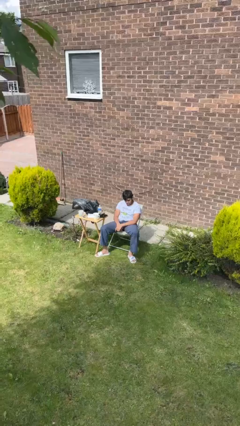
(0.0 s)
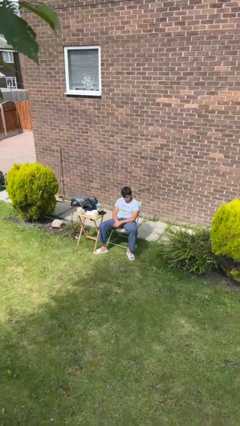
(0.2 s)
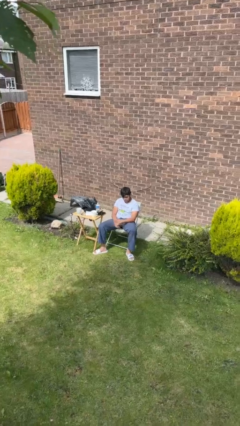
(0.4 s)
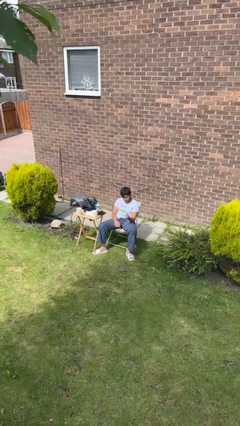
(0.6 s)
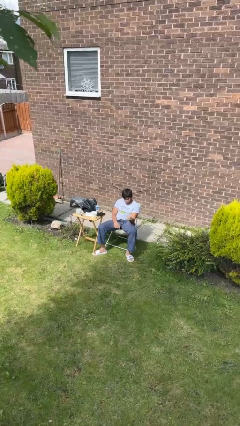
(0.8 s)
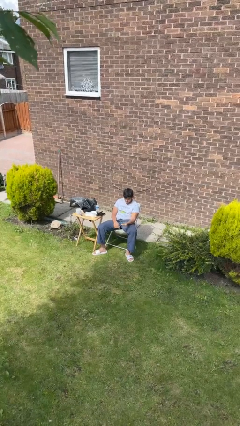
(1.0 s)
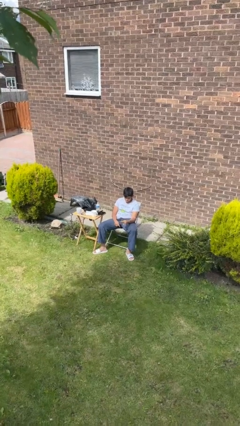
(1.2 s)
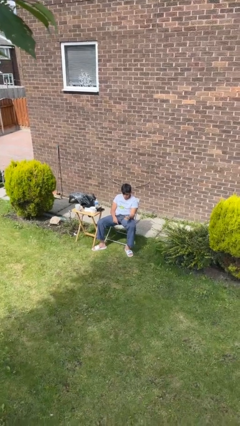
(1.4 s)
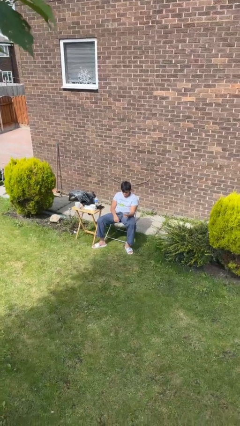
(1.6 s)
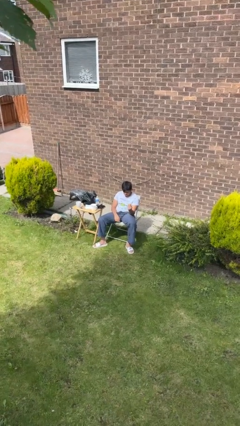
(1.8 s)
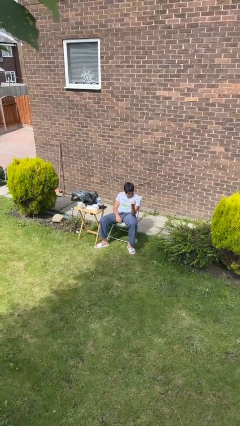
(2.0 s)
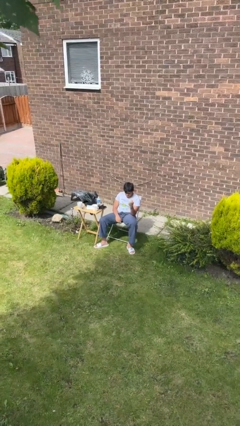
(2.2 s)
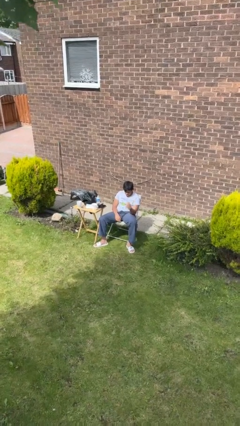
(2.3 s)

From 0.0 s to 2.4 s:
person snaps fingers

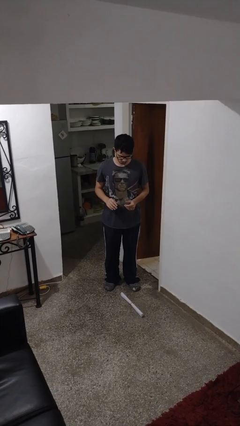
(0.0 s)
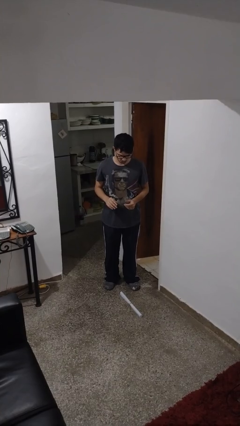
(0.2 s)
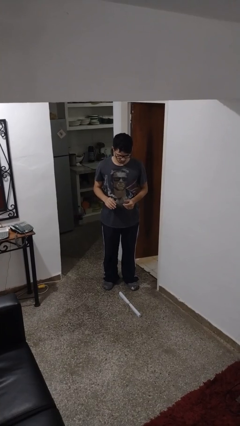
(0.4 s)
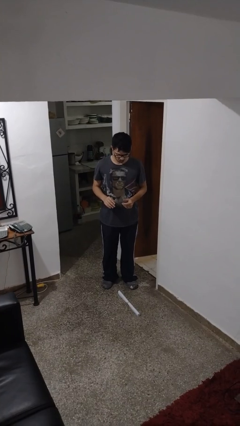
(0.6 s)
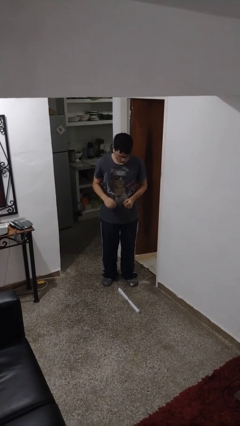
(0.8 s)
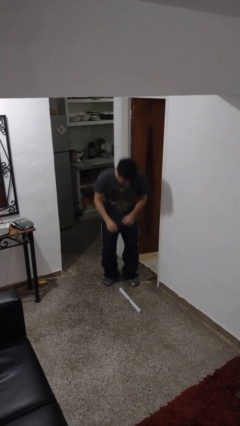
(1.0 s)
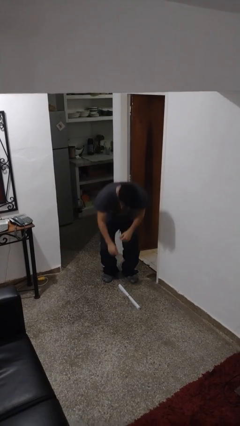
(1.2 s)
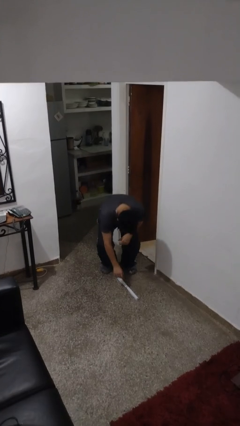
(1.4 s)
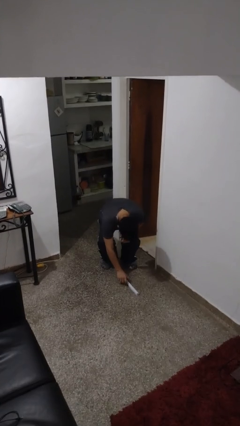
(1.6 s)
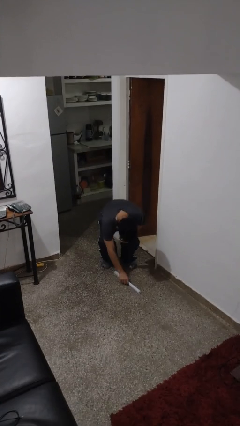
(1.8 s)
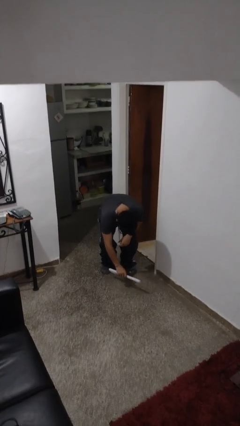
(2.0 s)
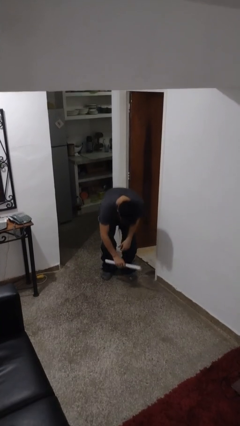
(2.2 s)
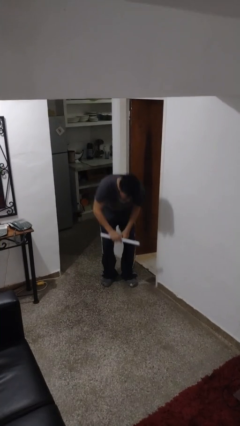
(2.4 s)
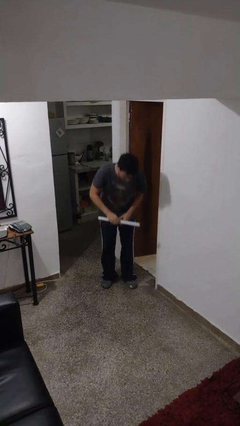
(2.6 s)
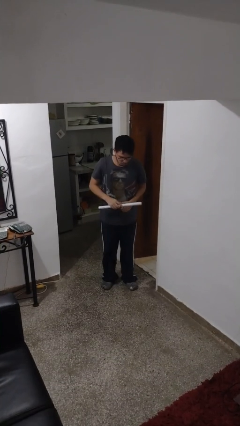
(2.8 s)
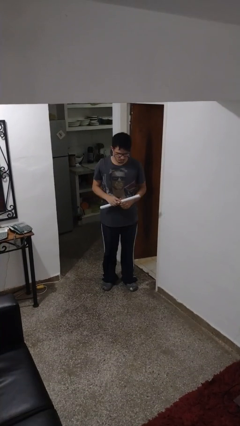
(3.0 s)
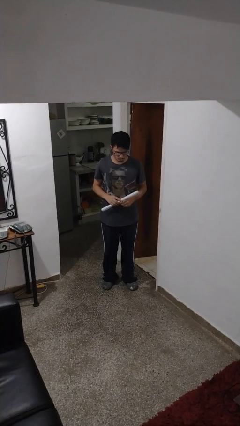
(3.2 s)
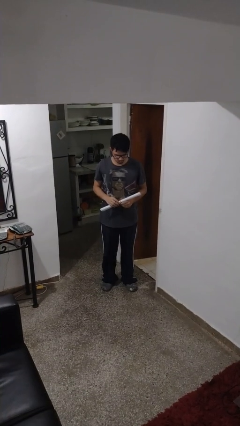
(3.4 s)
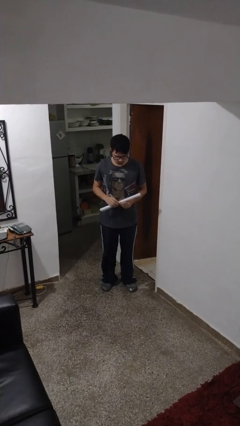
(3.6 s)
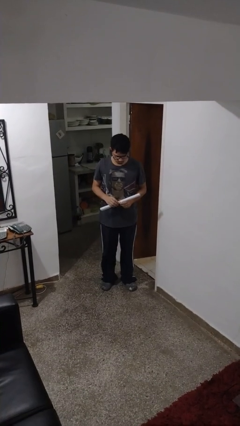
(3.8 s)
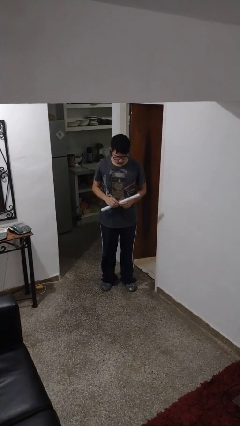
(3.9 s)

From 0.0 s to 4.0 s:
person picks up object from floor

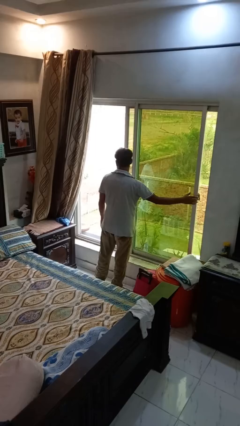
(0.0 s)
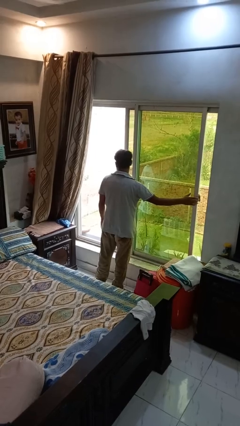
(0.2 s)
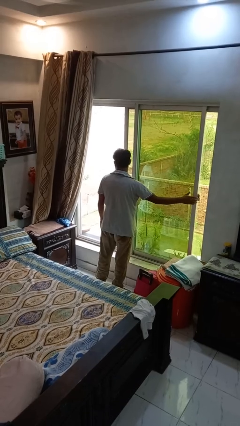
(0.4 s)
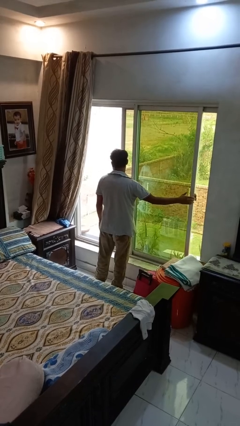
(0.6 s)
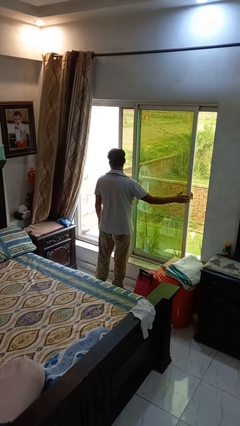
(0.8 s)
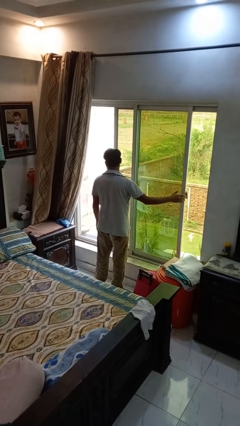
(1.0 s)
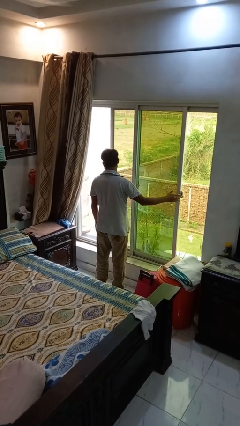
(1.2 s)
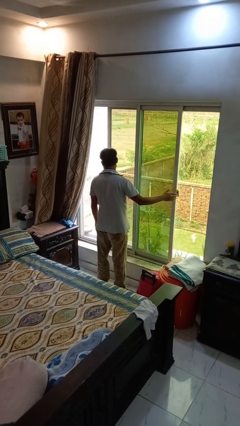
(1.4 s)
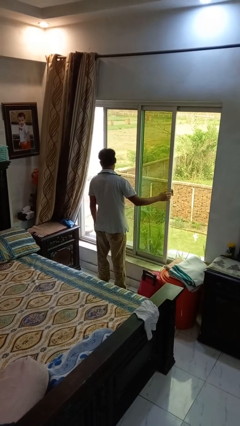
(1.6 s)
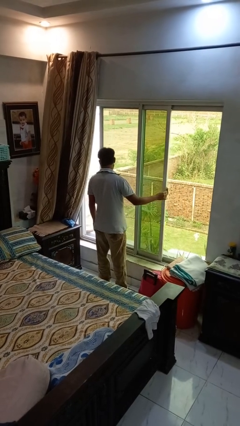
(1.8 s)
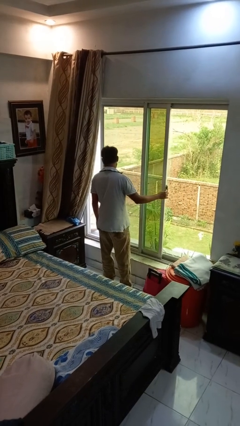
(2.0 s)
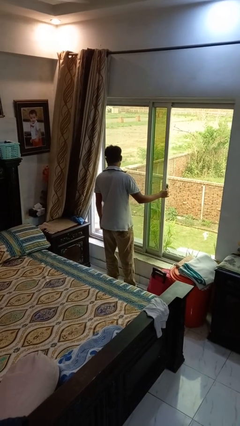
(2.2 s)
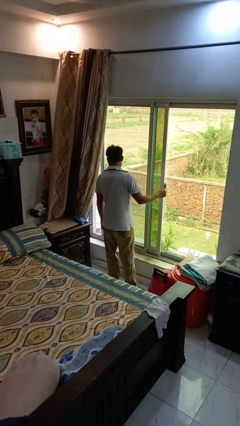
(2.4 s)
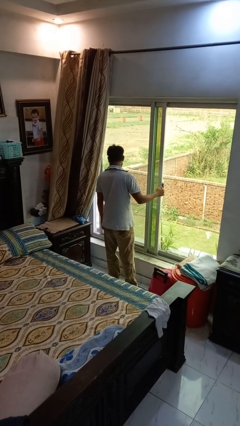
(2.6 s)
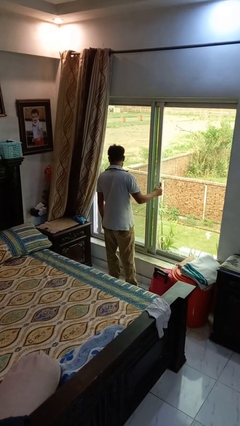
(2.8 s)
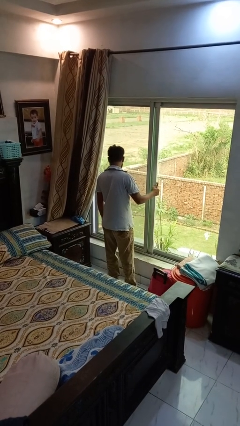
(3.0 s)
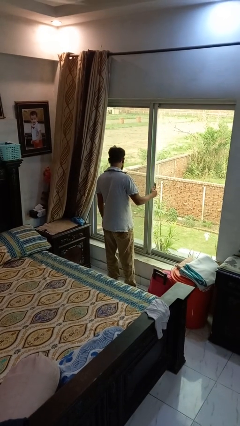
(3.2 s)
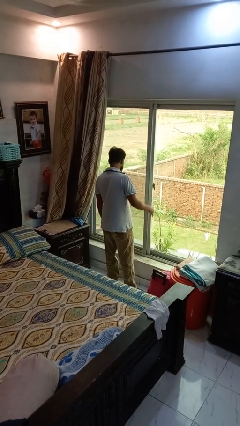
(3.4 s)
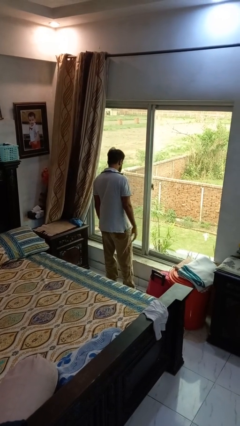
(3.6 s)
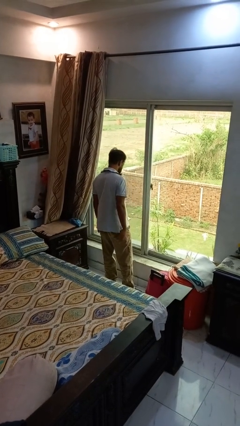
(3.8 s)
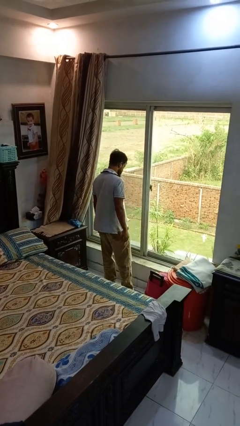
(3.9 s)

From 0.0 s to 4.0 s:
person closes sliding door

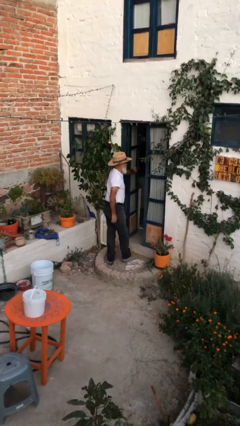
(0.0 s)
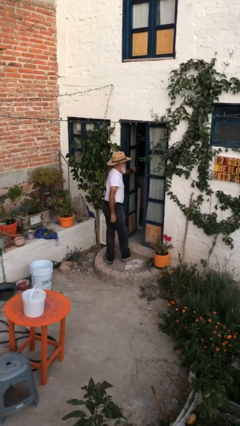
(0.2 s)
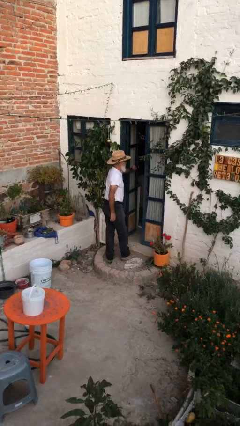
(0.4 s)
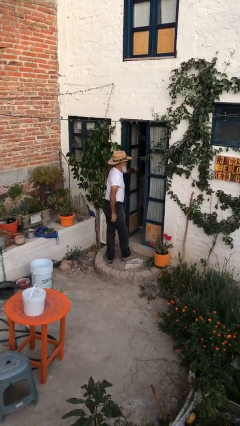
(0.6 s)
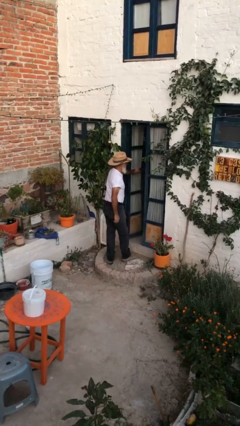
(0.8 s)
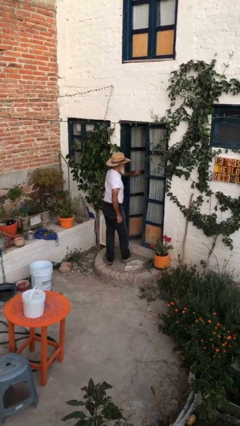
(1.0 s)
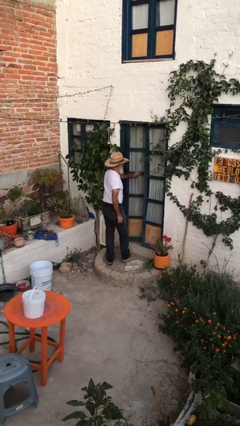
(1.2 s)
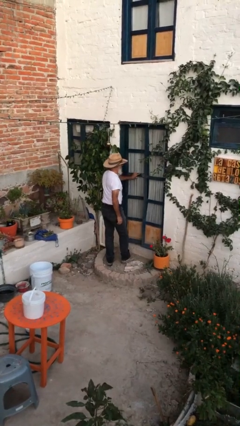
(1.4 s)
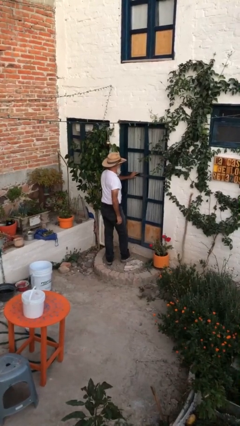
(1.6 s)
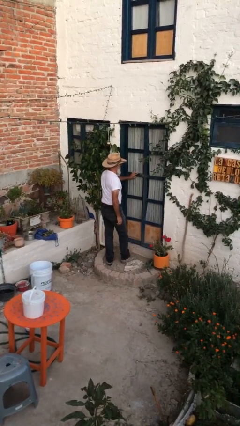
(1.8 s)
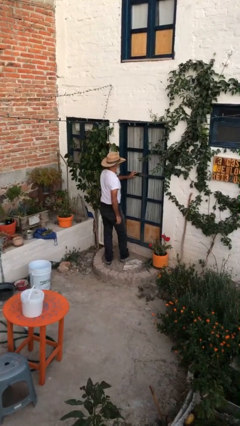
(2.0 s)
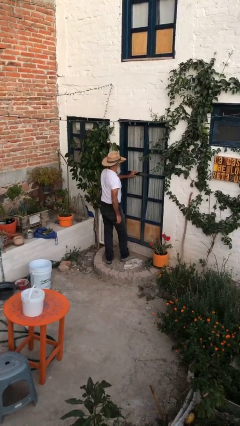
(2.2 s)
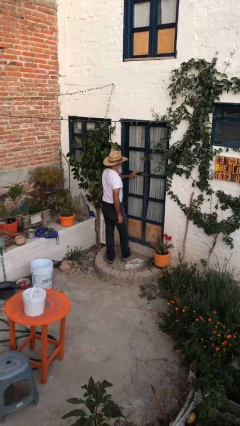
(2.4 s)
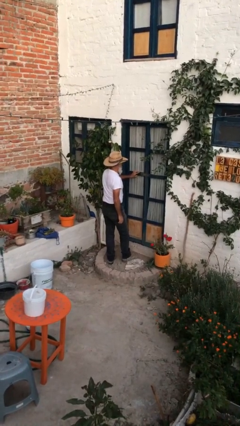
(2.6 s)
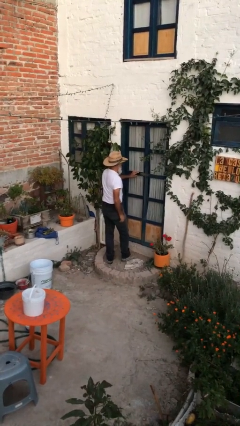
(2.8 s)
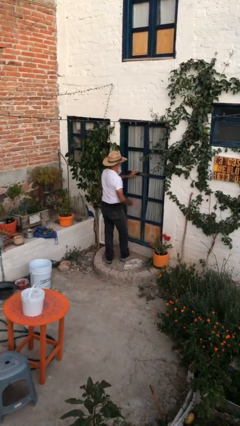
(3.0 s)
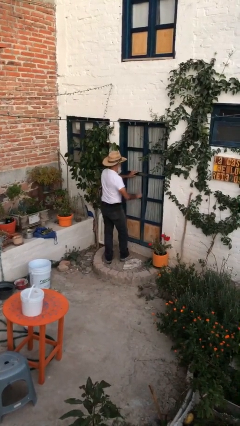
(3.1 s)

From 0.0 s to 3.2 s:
person closes facility door

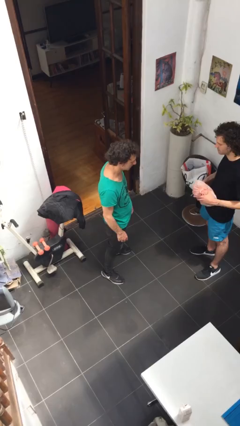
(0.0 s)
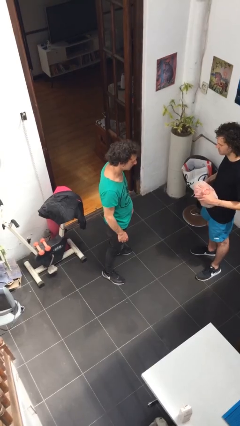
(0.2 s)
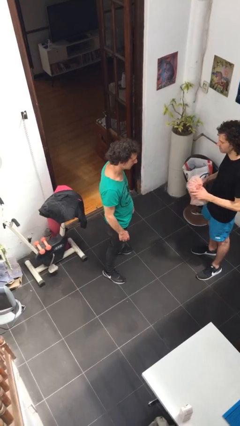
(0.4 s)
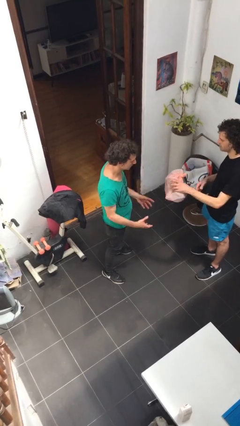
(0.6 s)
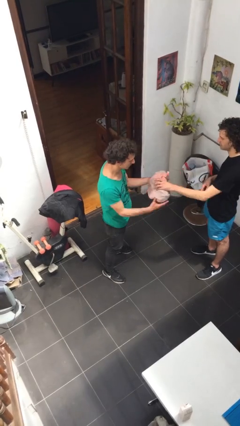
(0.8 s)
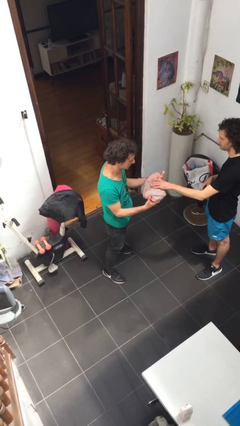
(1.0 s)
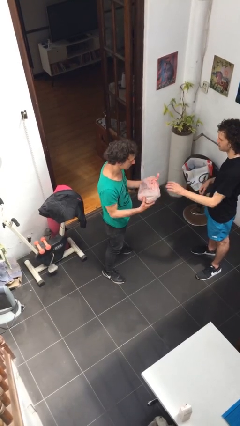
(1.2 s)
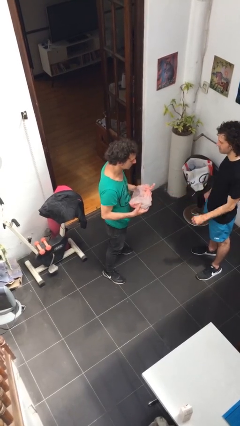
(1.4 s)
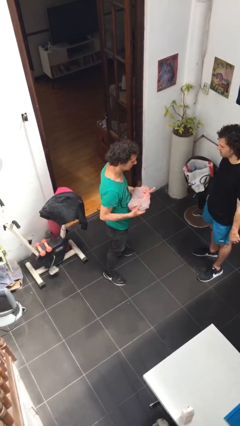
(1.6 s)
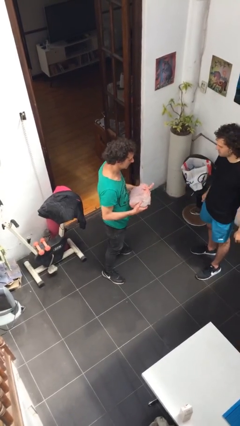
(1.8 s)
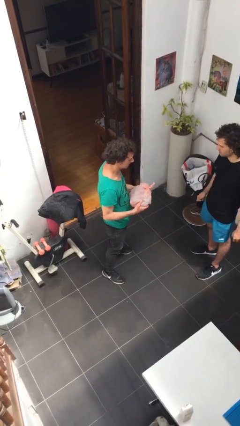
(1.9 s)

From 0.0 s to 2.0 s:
person transfers object to person

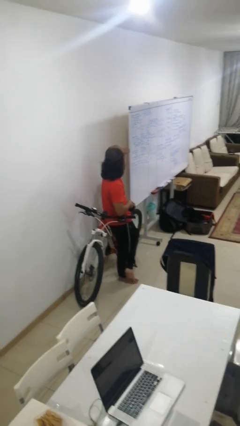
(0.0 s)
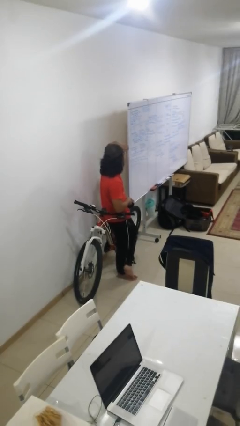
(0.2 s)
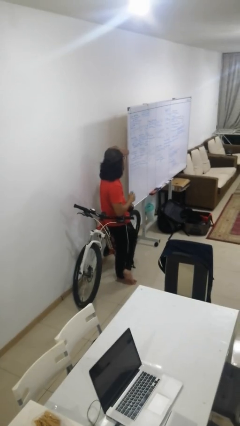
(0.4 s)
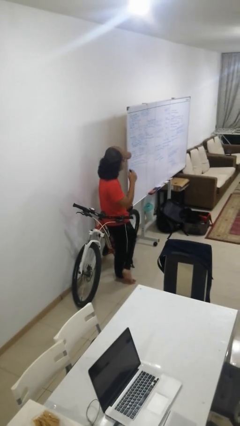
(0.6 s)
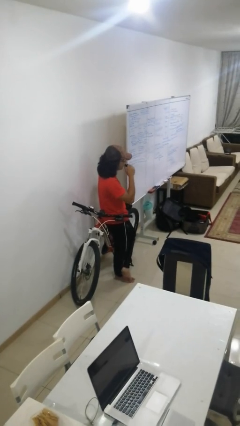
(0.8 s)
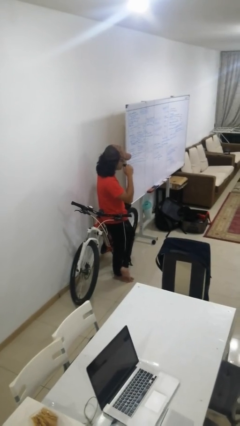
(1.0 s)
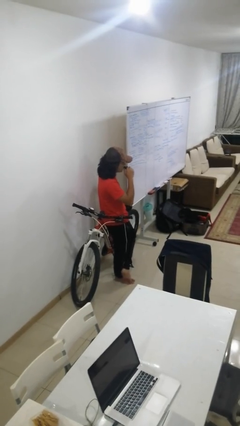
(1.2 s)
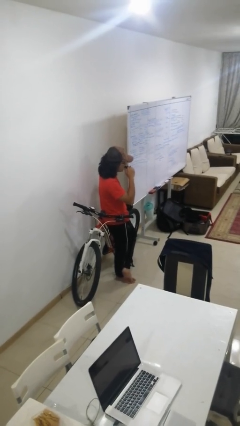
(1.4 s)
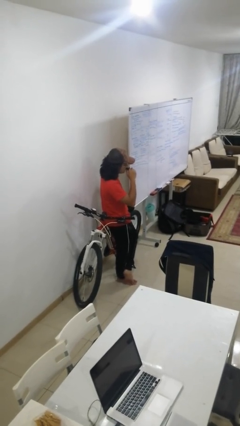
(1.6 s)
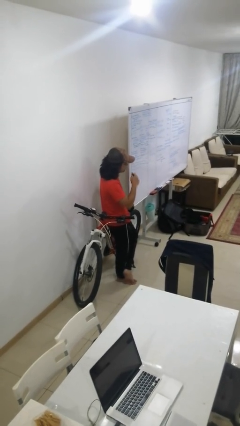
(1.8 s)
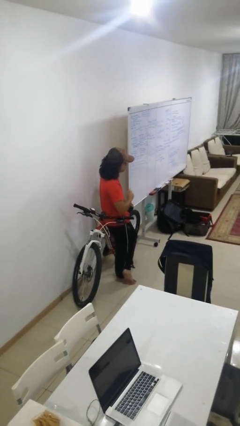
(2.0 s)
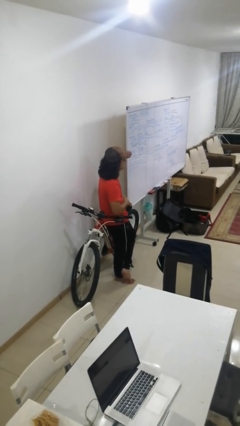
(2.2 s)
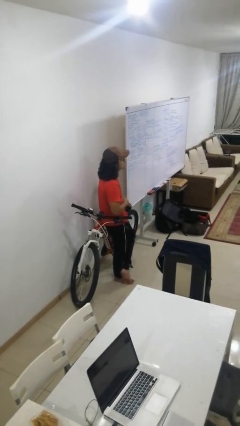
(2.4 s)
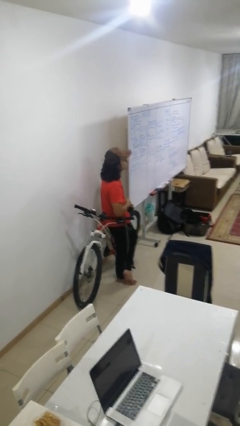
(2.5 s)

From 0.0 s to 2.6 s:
person vapes
